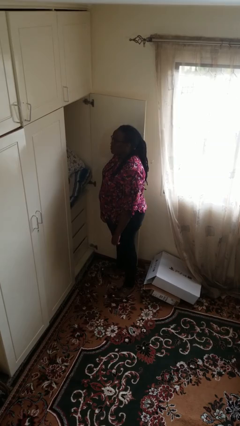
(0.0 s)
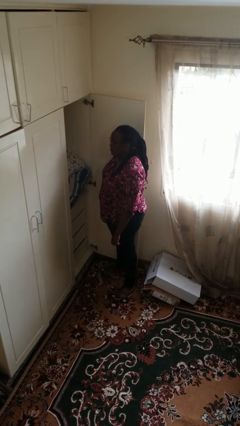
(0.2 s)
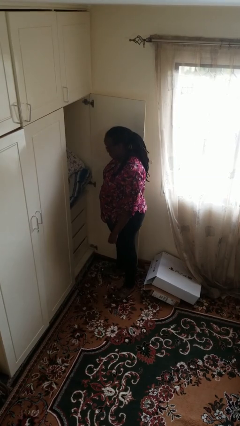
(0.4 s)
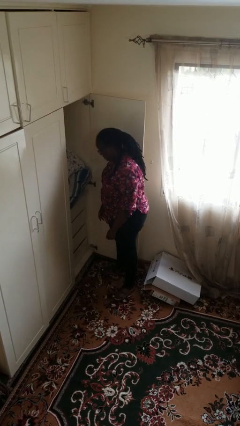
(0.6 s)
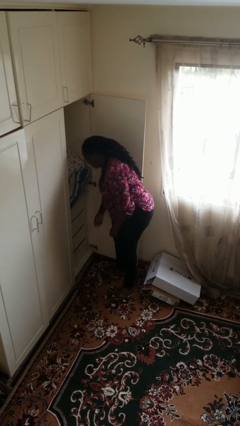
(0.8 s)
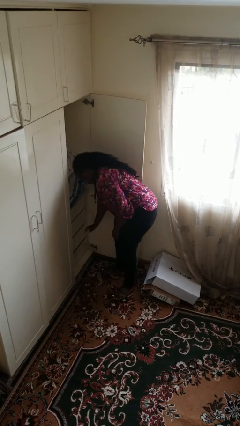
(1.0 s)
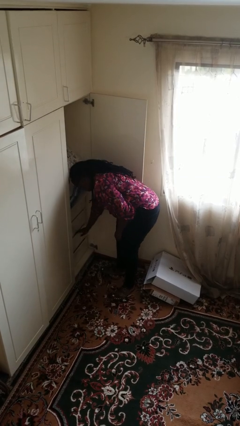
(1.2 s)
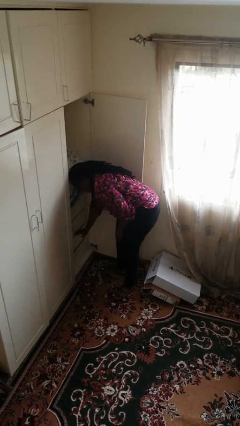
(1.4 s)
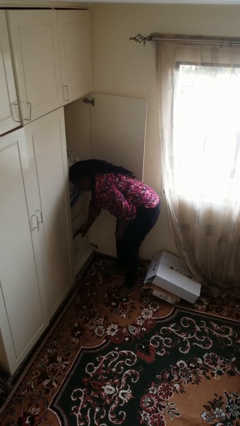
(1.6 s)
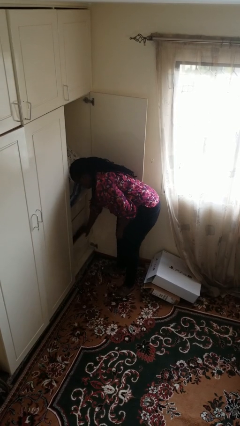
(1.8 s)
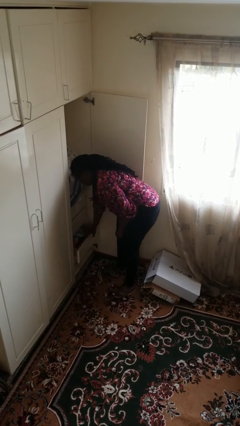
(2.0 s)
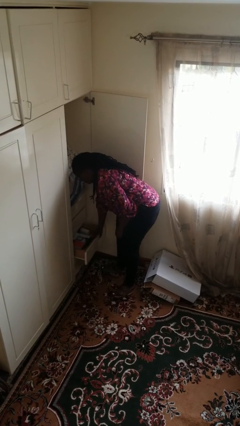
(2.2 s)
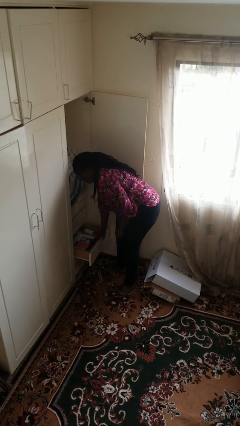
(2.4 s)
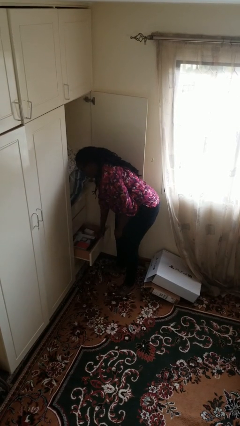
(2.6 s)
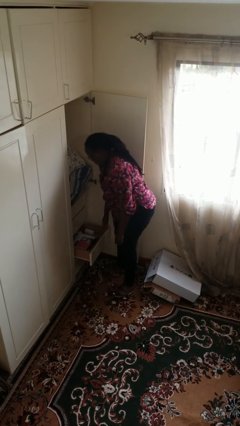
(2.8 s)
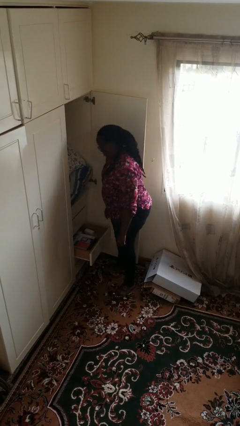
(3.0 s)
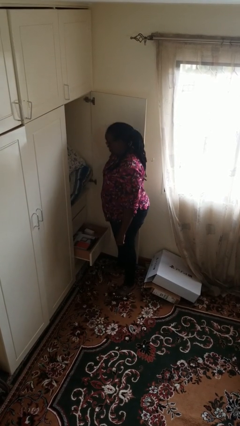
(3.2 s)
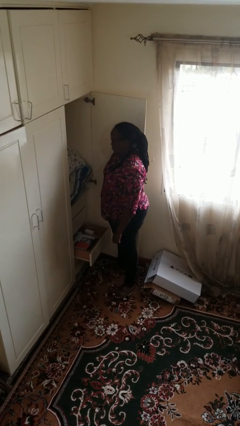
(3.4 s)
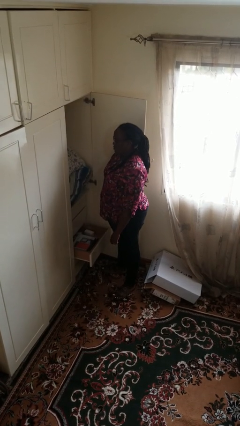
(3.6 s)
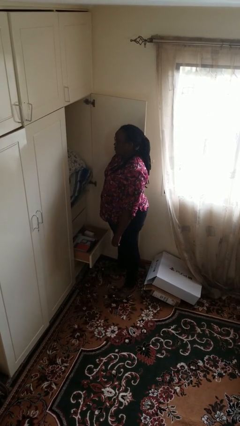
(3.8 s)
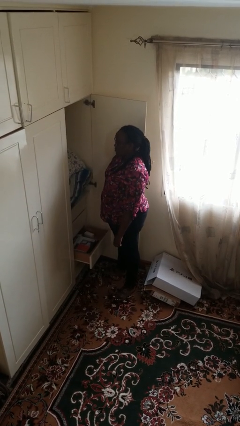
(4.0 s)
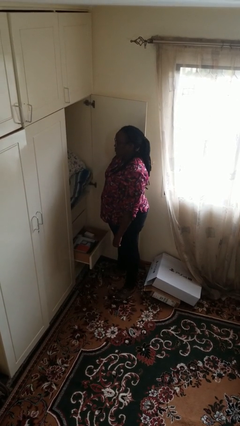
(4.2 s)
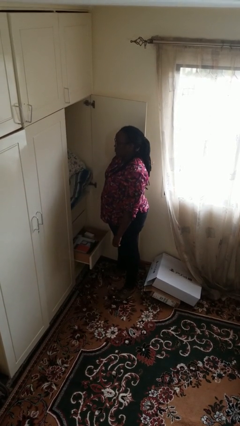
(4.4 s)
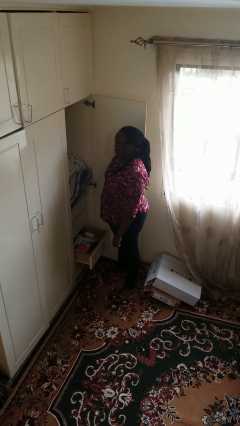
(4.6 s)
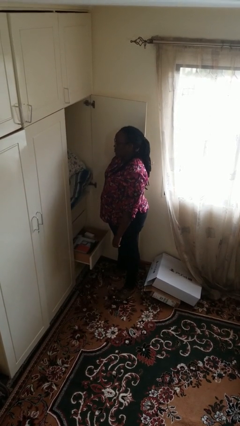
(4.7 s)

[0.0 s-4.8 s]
person opens dresser drawer

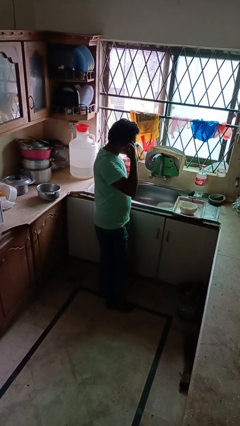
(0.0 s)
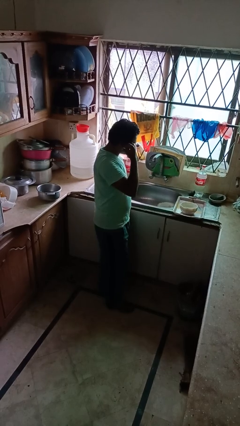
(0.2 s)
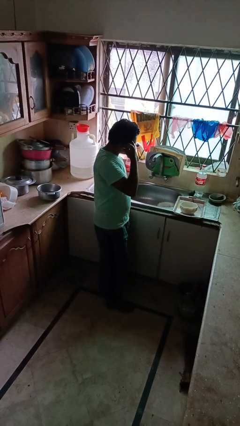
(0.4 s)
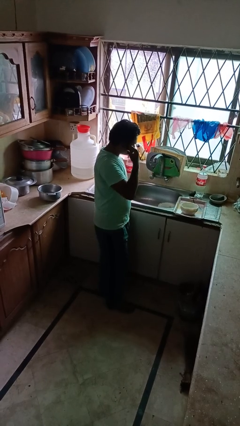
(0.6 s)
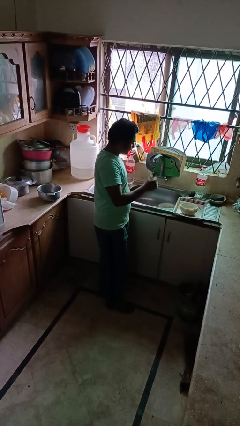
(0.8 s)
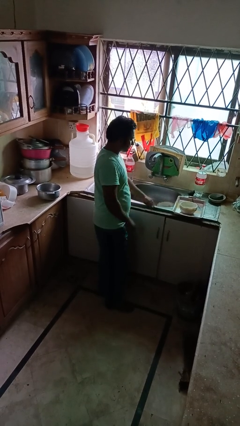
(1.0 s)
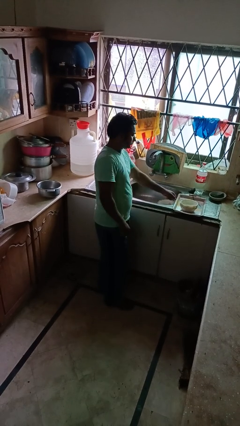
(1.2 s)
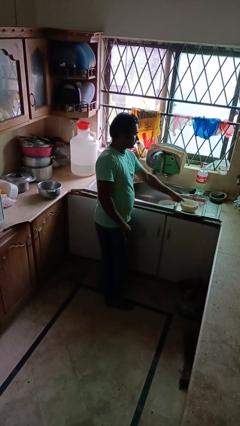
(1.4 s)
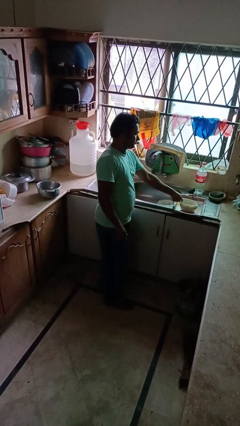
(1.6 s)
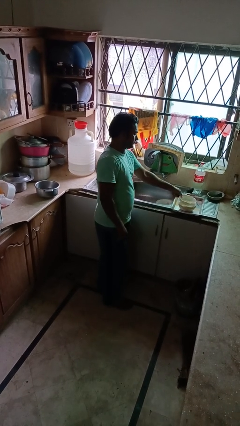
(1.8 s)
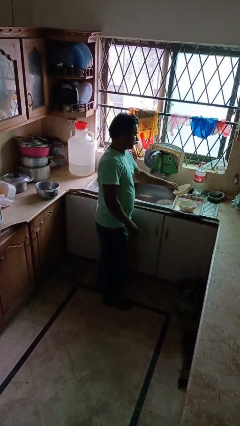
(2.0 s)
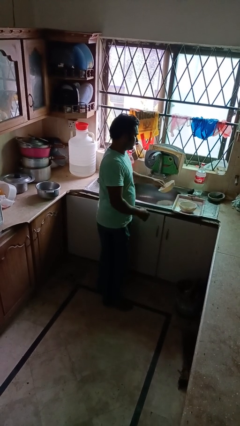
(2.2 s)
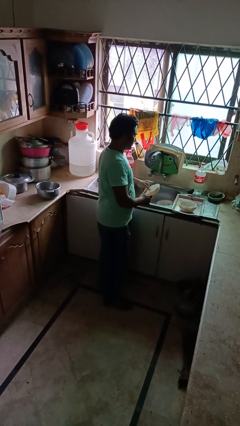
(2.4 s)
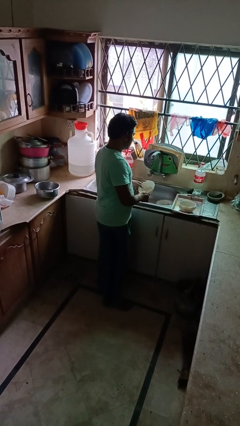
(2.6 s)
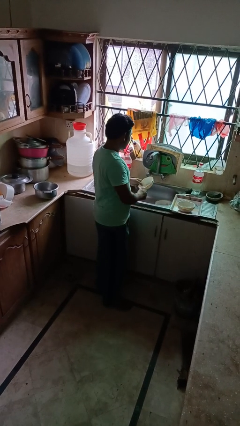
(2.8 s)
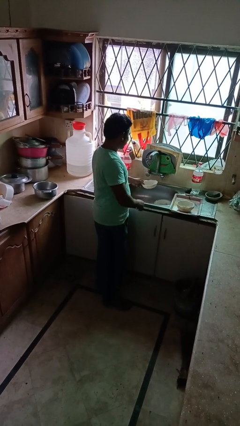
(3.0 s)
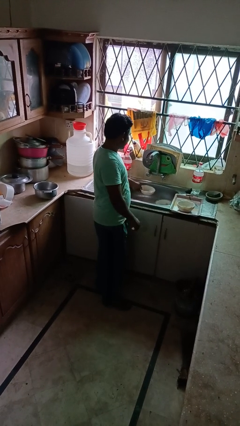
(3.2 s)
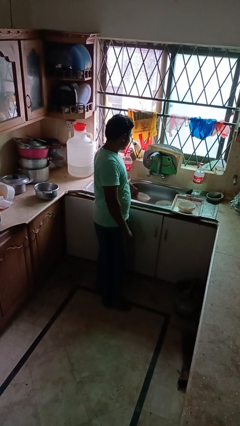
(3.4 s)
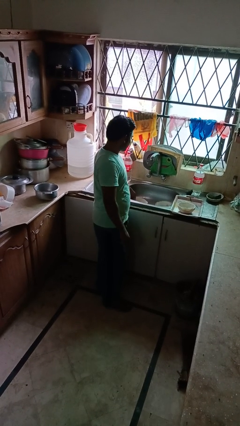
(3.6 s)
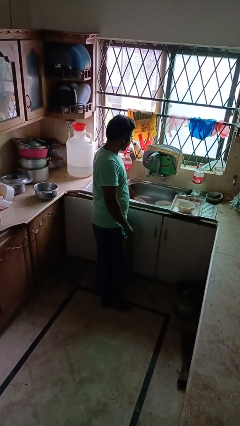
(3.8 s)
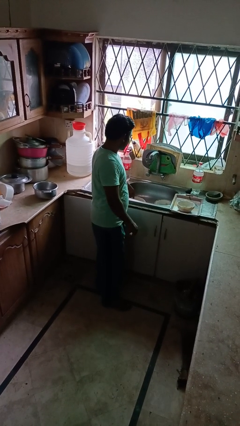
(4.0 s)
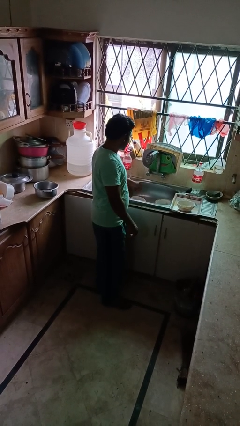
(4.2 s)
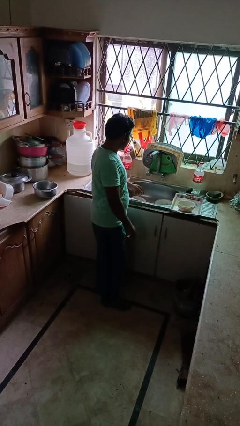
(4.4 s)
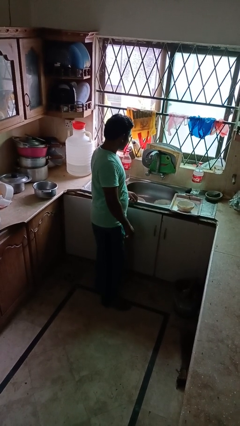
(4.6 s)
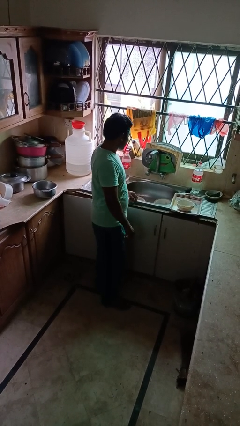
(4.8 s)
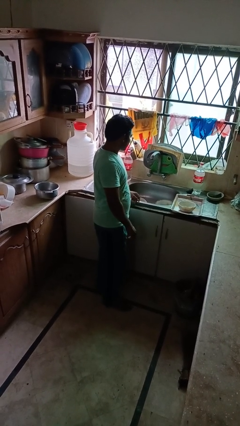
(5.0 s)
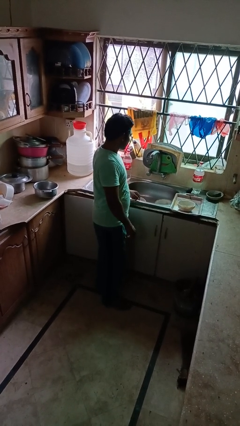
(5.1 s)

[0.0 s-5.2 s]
person loads dishwasher

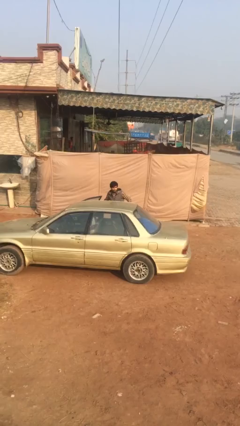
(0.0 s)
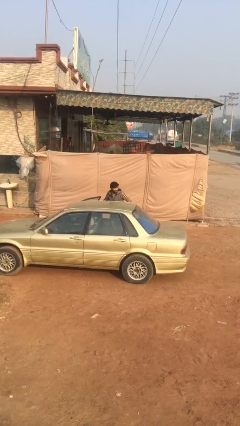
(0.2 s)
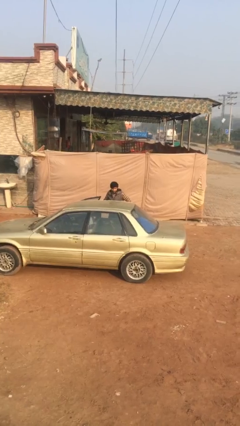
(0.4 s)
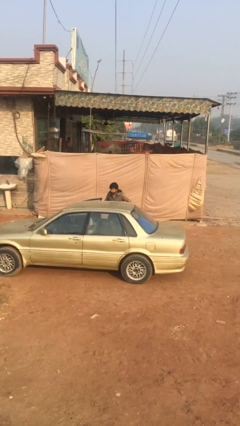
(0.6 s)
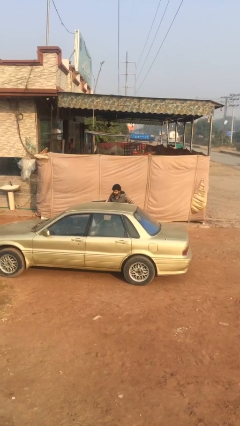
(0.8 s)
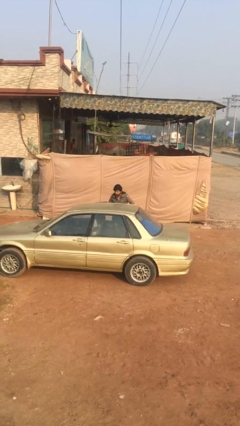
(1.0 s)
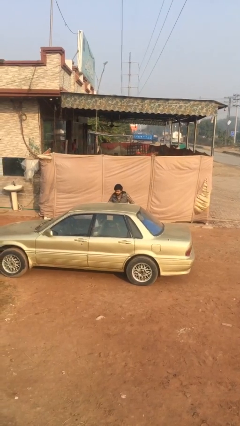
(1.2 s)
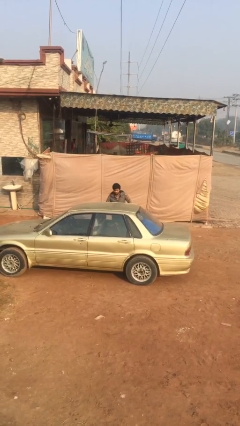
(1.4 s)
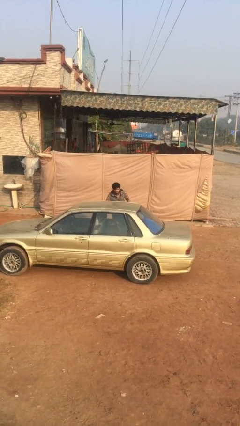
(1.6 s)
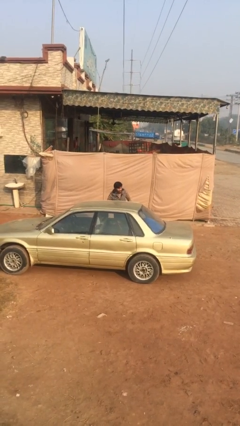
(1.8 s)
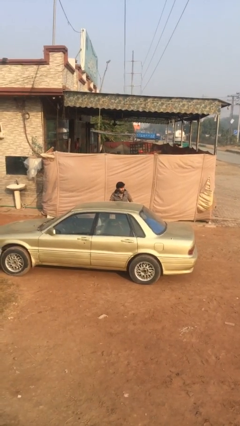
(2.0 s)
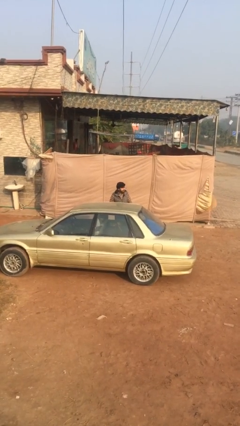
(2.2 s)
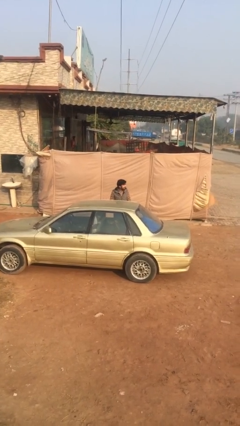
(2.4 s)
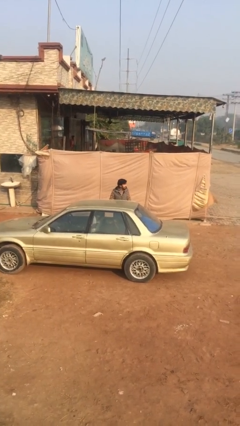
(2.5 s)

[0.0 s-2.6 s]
person closes car door

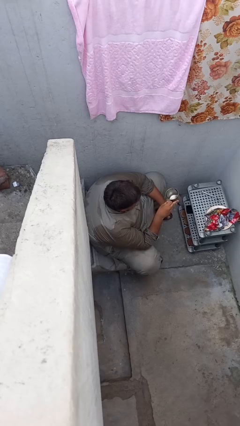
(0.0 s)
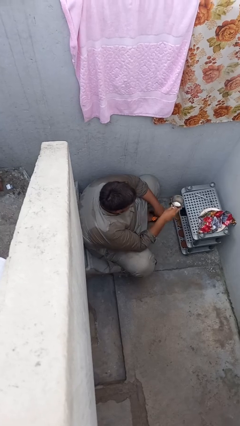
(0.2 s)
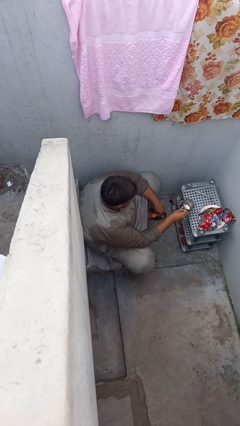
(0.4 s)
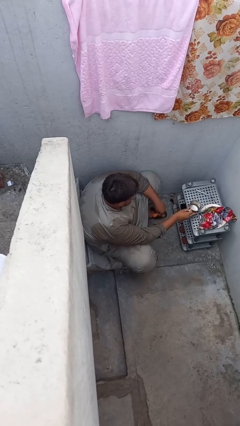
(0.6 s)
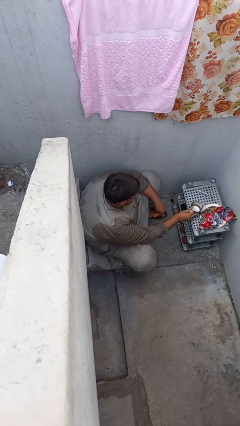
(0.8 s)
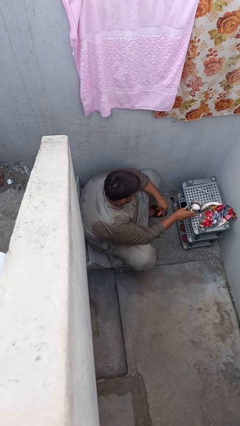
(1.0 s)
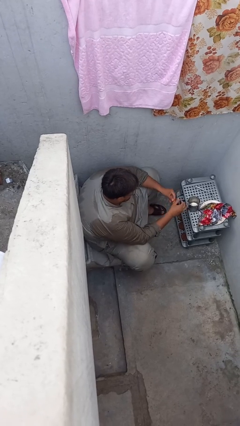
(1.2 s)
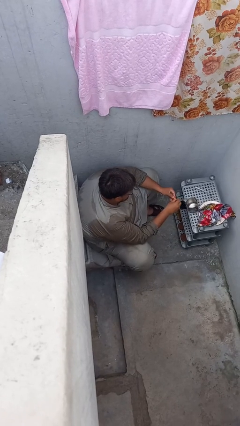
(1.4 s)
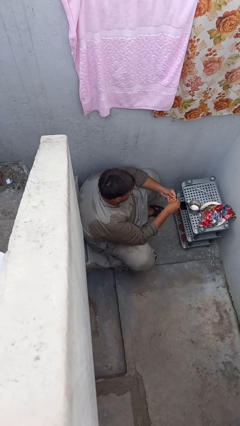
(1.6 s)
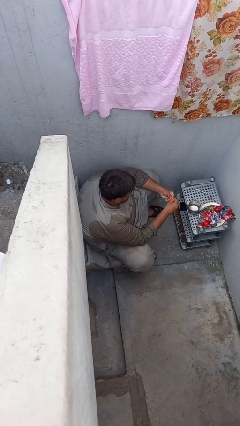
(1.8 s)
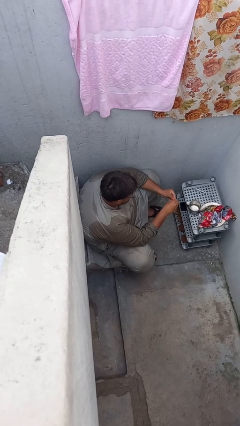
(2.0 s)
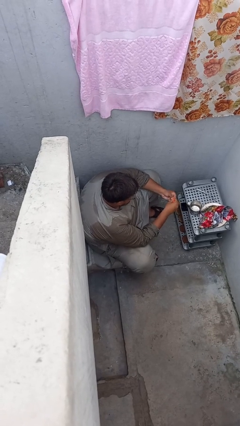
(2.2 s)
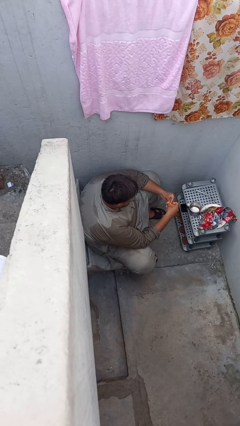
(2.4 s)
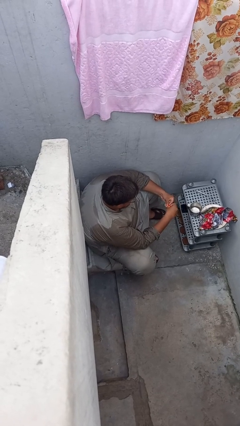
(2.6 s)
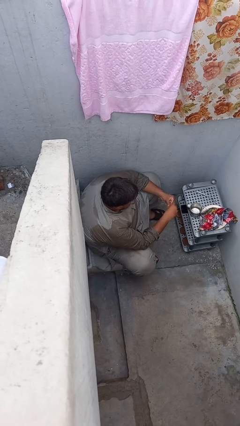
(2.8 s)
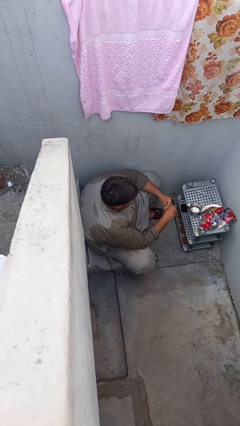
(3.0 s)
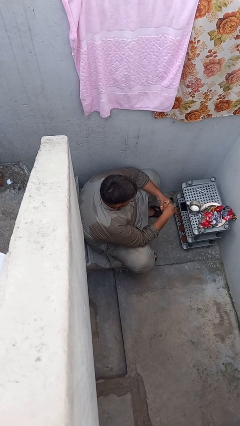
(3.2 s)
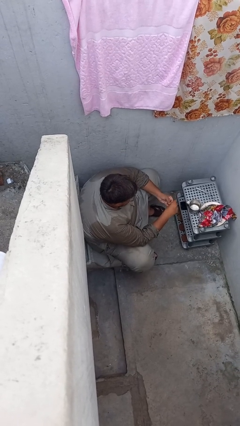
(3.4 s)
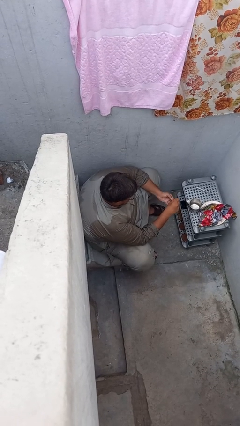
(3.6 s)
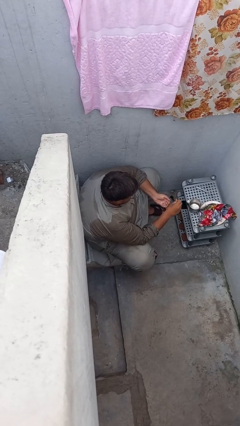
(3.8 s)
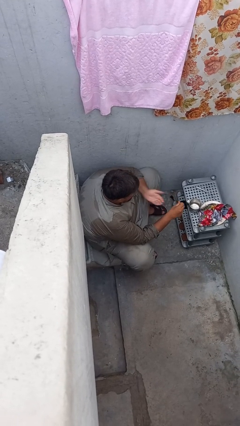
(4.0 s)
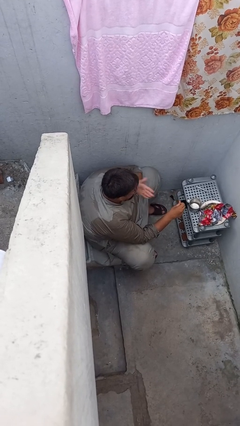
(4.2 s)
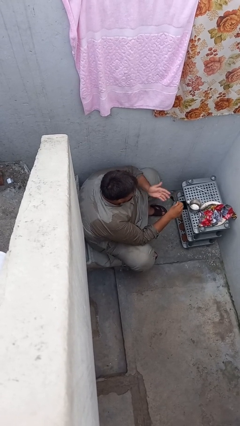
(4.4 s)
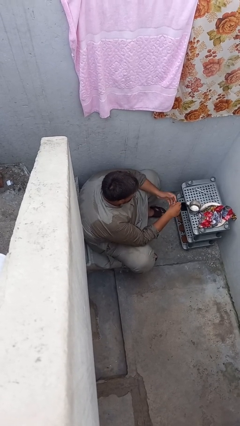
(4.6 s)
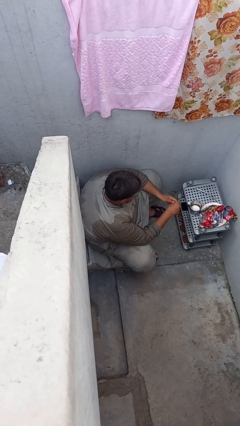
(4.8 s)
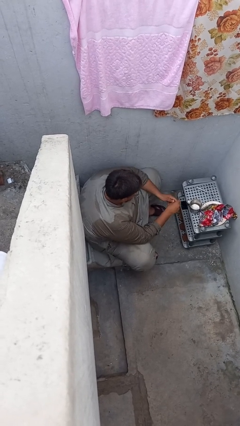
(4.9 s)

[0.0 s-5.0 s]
person takes medicine pills
